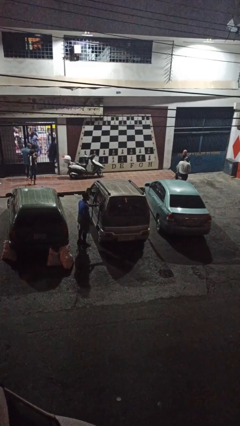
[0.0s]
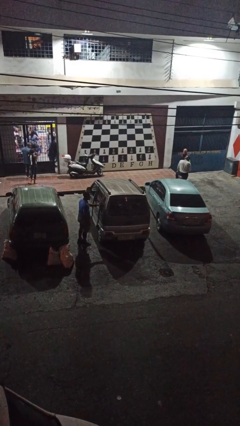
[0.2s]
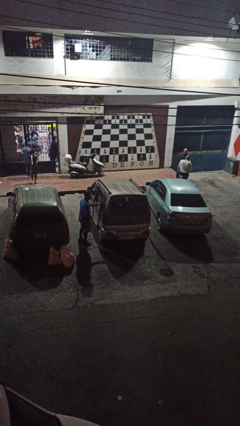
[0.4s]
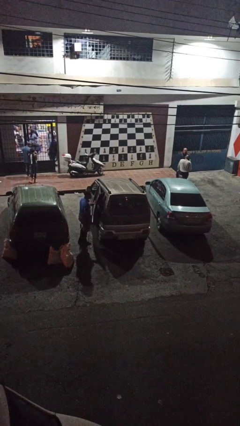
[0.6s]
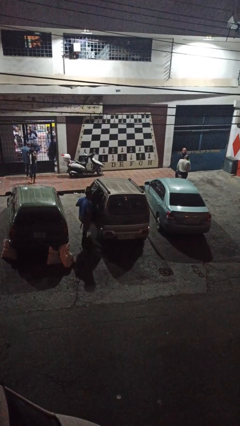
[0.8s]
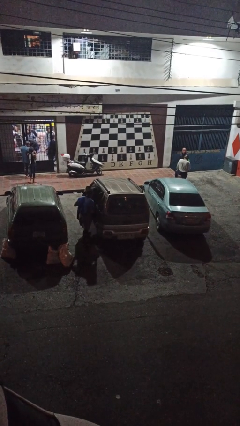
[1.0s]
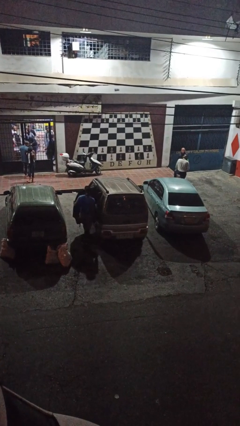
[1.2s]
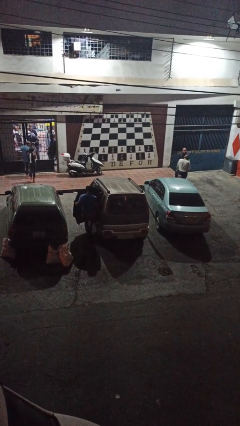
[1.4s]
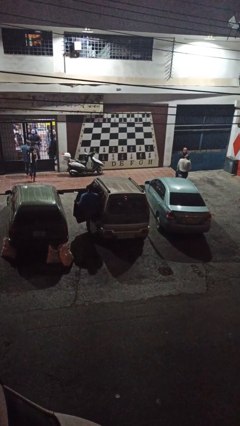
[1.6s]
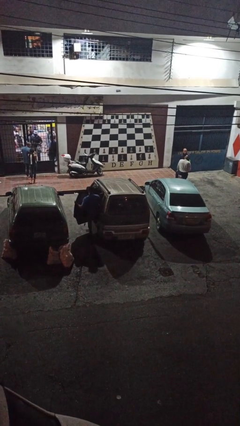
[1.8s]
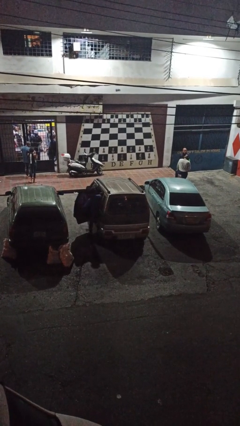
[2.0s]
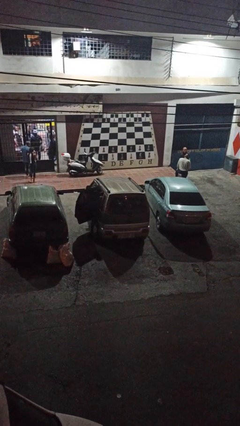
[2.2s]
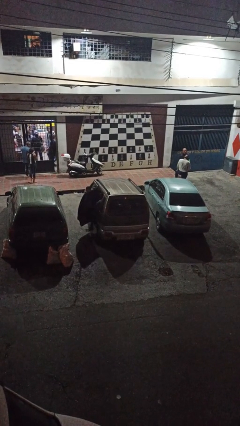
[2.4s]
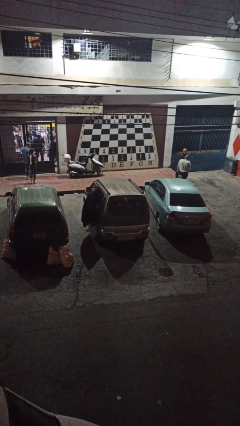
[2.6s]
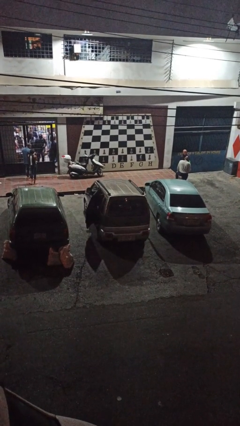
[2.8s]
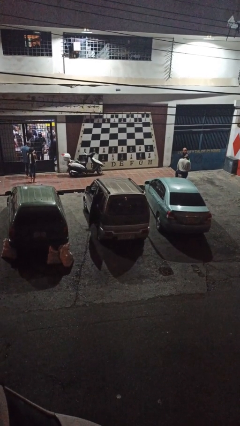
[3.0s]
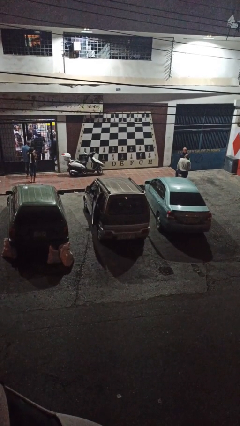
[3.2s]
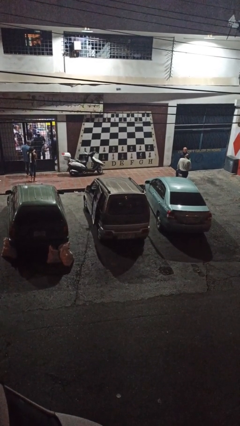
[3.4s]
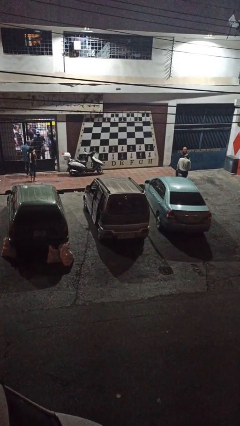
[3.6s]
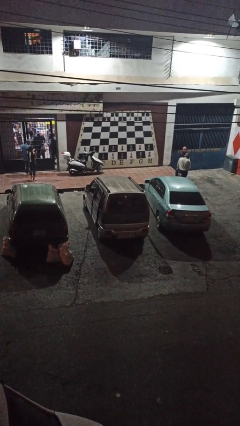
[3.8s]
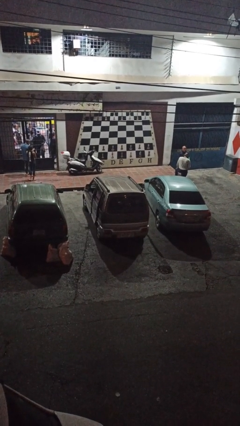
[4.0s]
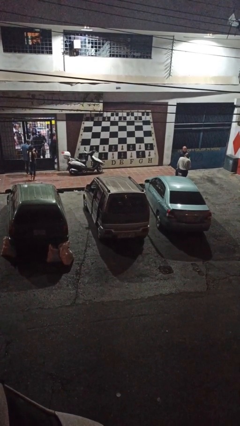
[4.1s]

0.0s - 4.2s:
car picks up person

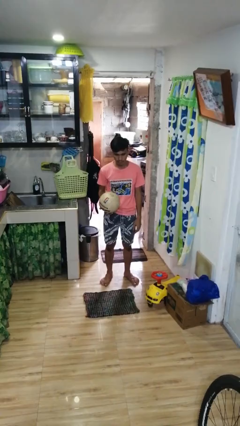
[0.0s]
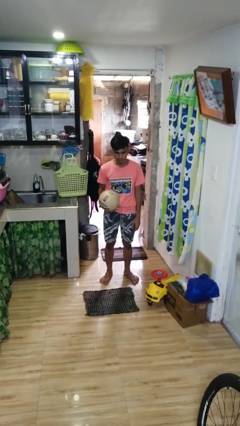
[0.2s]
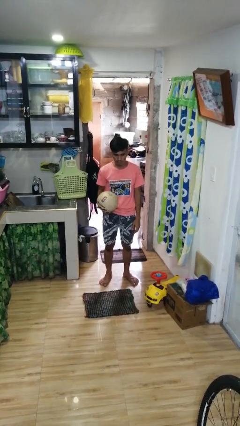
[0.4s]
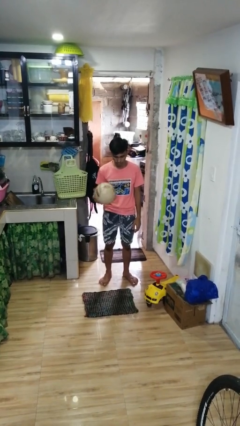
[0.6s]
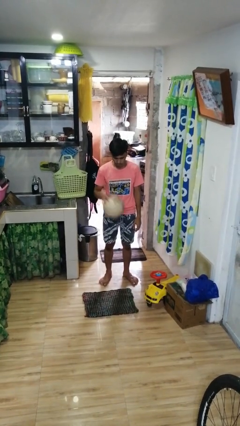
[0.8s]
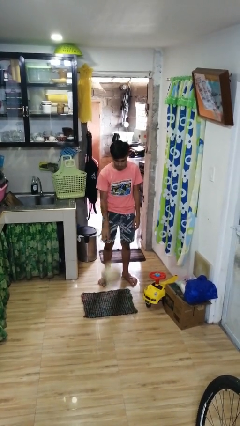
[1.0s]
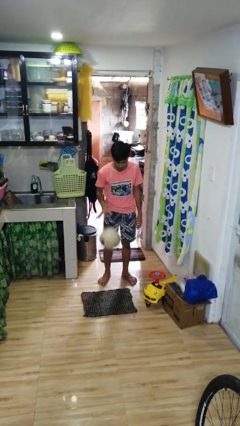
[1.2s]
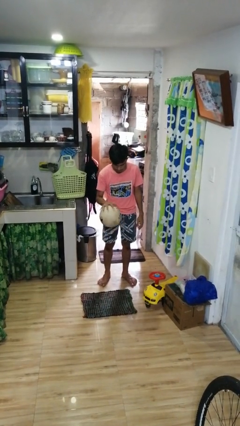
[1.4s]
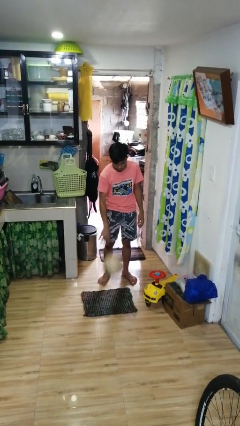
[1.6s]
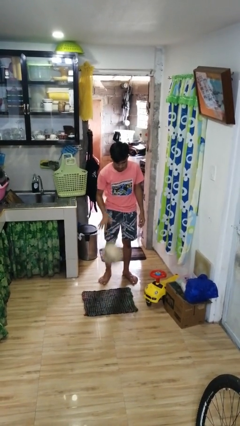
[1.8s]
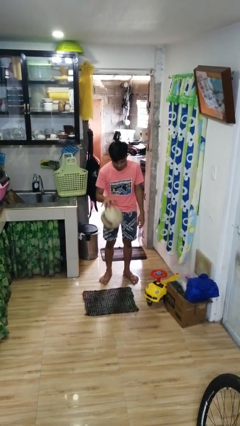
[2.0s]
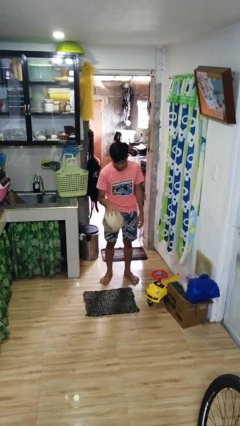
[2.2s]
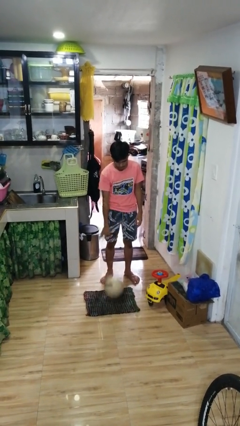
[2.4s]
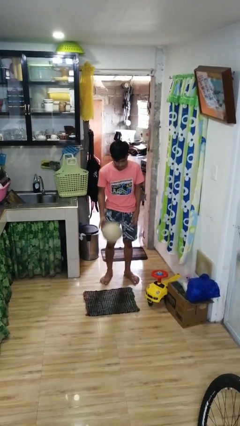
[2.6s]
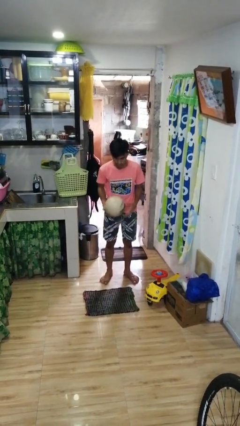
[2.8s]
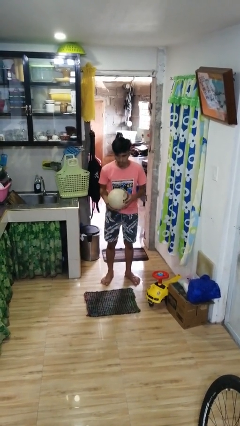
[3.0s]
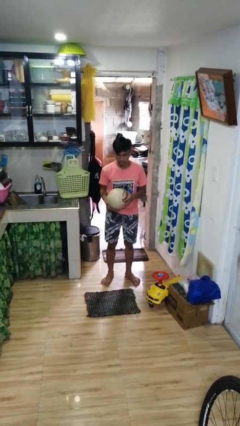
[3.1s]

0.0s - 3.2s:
person bounces ball on floor

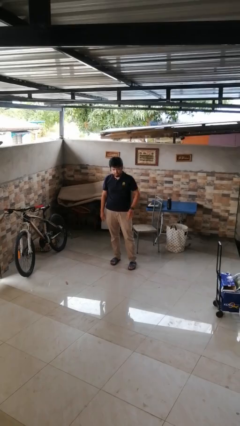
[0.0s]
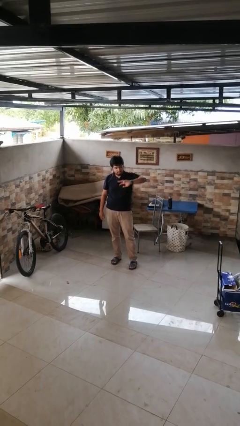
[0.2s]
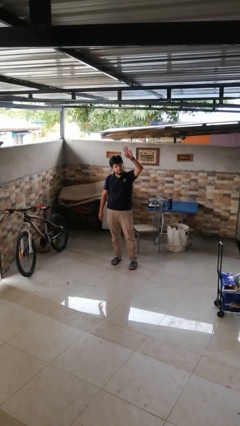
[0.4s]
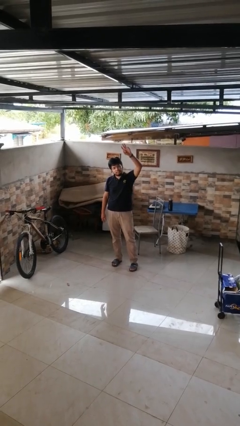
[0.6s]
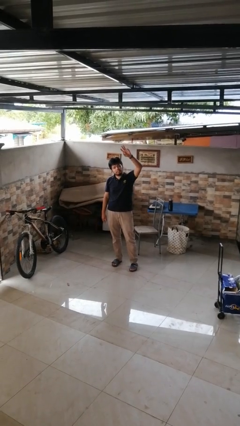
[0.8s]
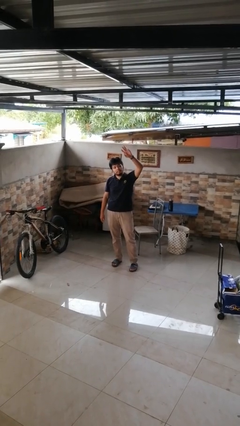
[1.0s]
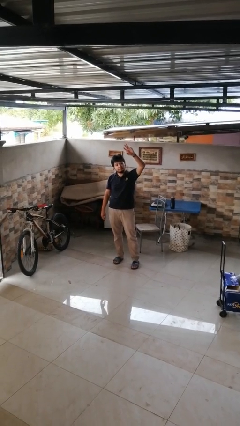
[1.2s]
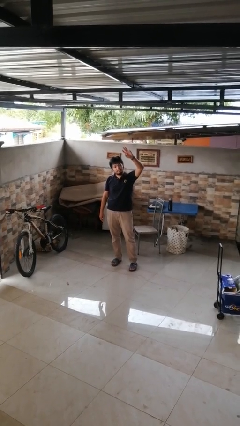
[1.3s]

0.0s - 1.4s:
person gestures swipe up

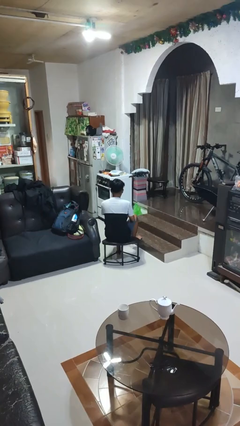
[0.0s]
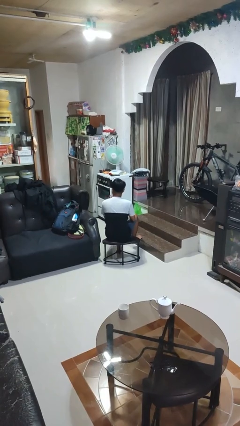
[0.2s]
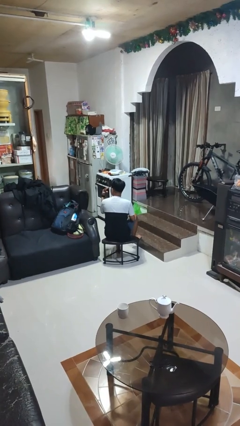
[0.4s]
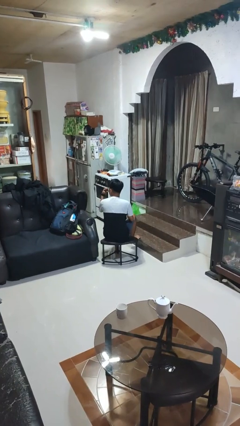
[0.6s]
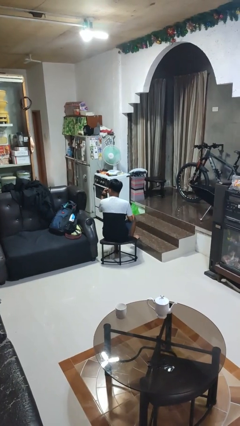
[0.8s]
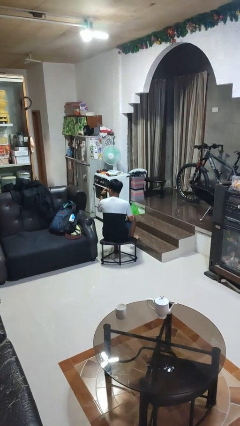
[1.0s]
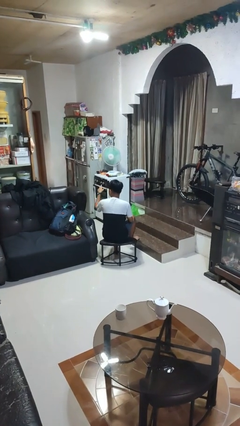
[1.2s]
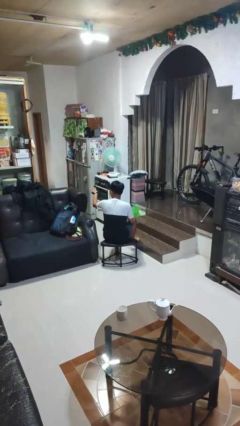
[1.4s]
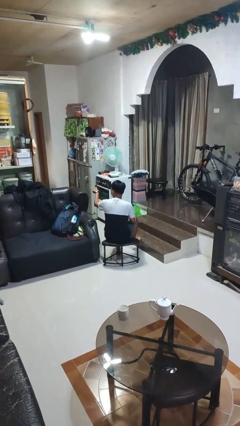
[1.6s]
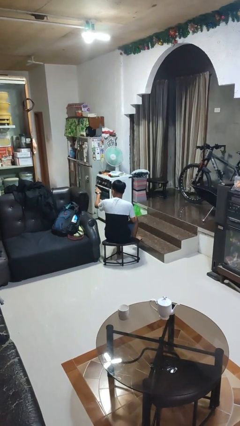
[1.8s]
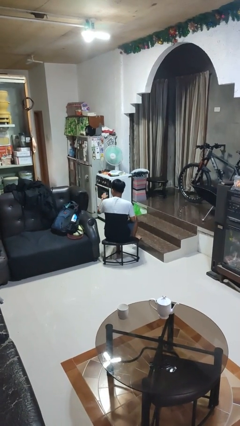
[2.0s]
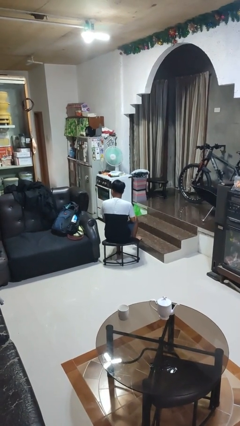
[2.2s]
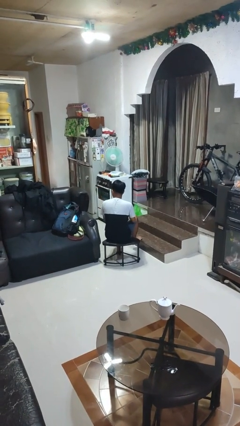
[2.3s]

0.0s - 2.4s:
person gestures watch closely

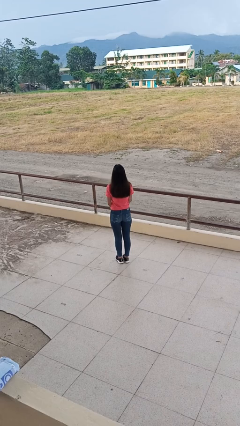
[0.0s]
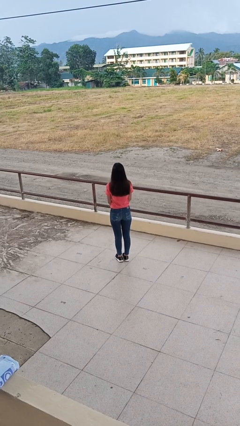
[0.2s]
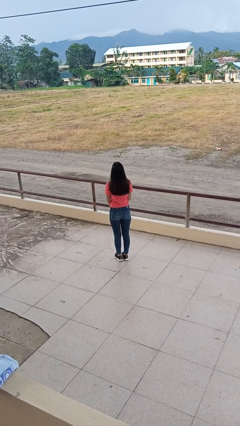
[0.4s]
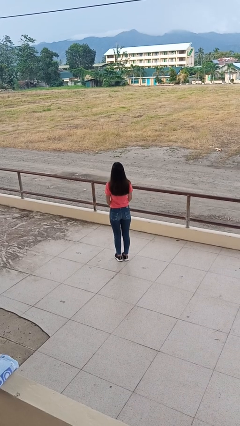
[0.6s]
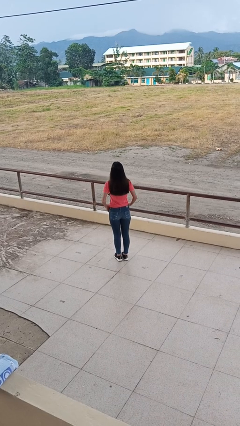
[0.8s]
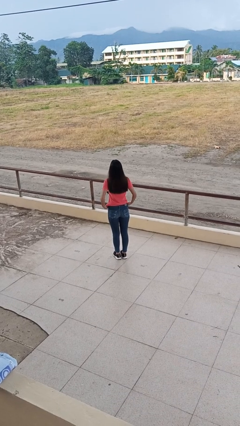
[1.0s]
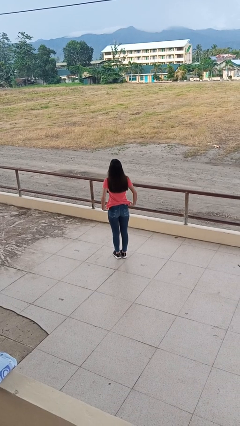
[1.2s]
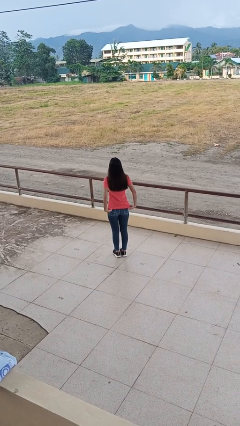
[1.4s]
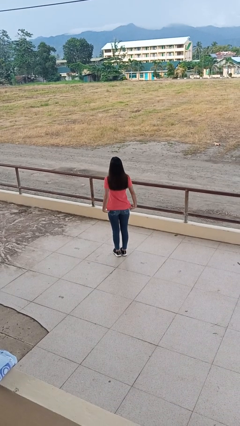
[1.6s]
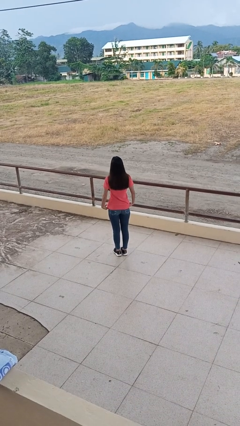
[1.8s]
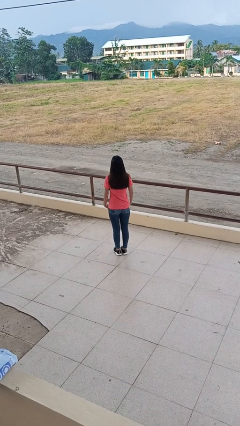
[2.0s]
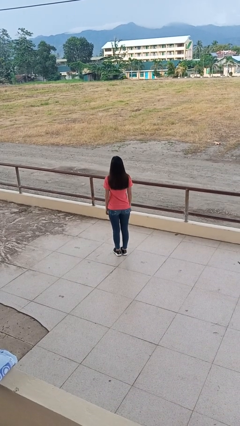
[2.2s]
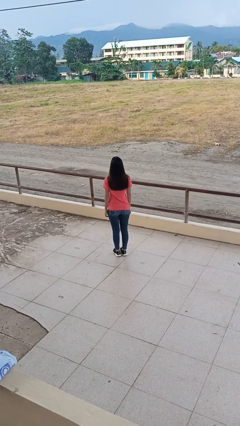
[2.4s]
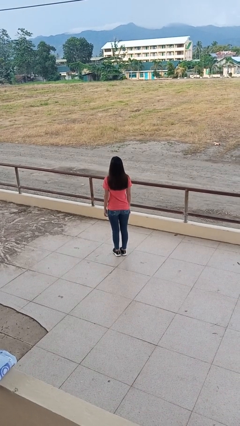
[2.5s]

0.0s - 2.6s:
person untucks shirt

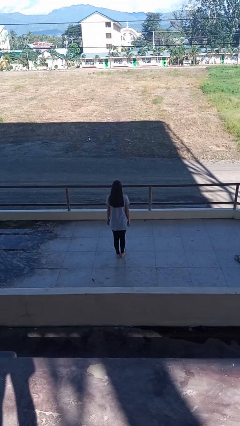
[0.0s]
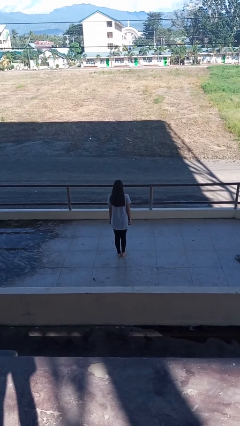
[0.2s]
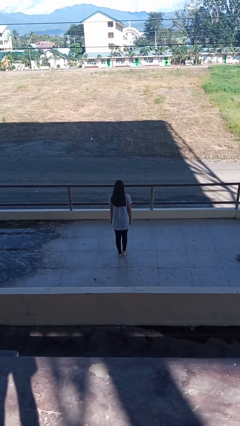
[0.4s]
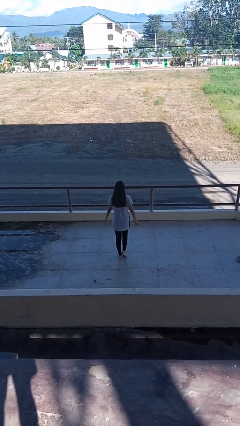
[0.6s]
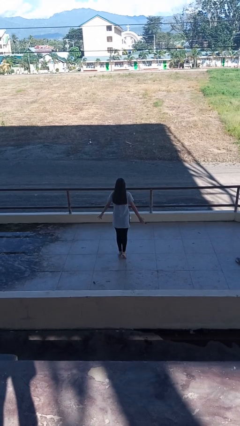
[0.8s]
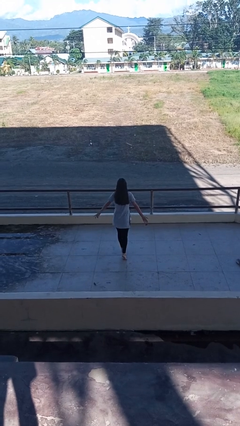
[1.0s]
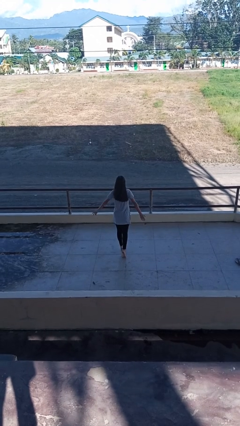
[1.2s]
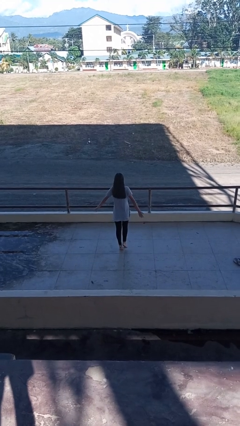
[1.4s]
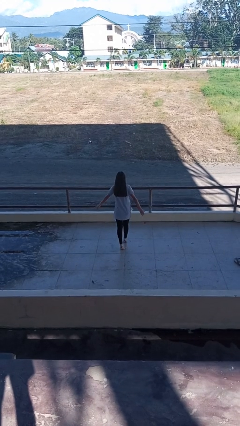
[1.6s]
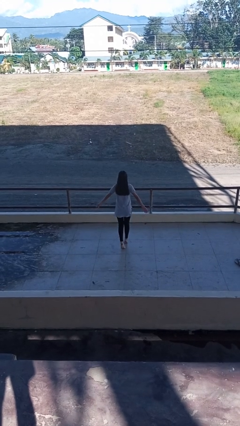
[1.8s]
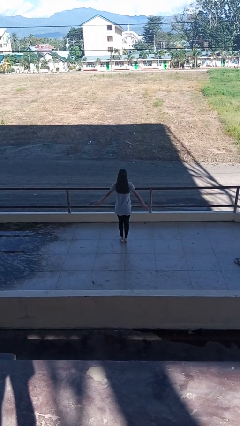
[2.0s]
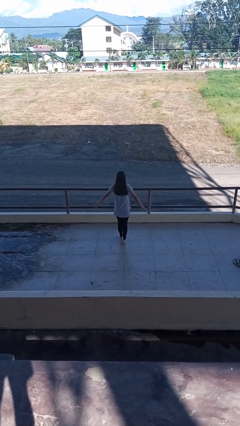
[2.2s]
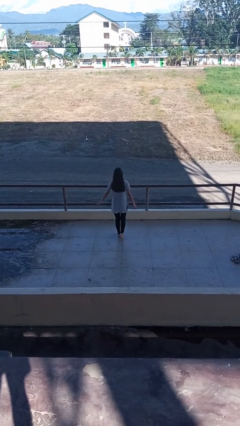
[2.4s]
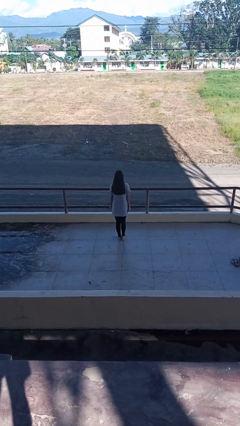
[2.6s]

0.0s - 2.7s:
person walks tiptoe

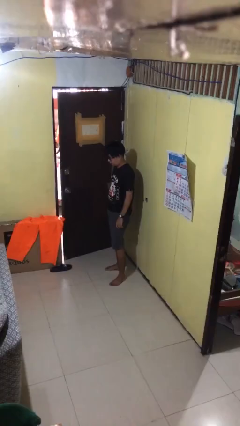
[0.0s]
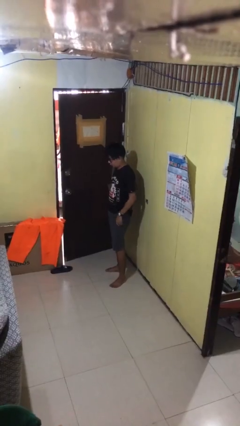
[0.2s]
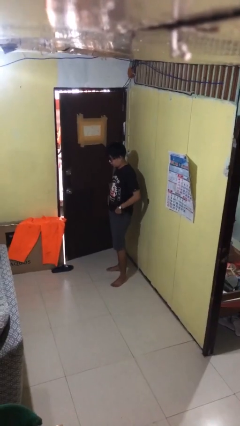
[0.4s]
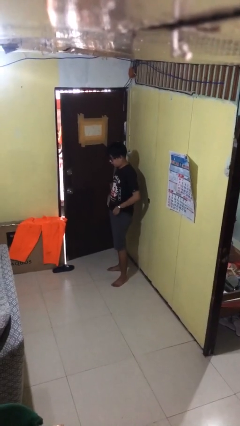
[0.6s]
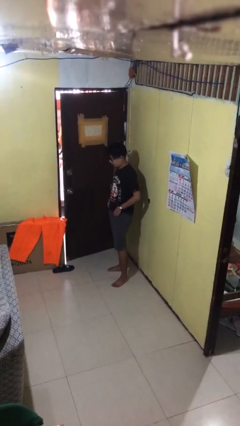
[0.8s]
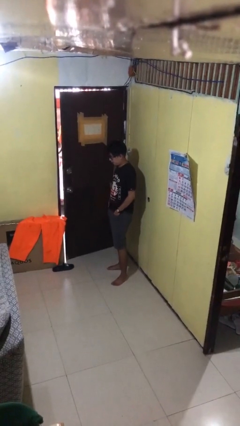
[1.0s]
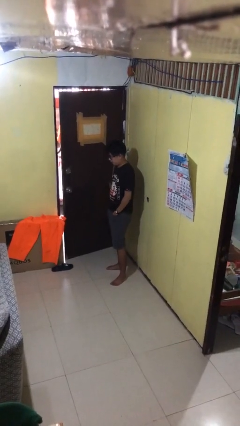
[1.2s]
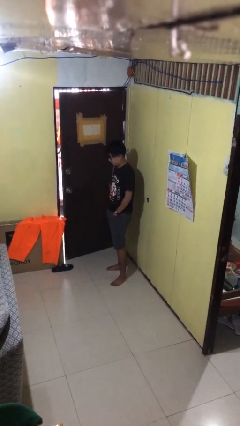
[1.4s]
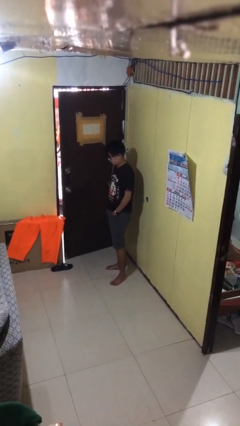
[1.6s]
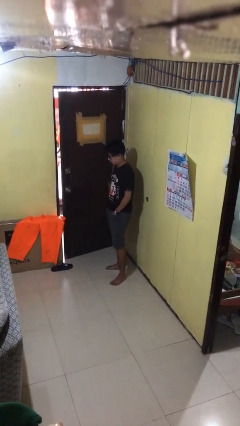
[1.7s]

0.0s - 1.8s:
person puts hands in back pockets
